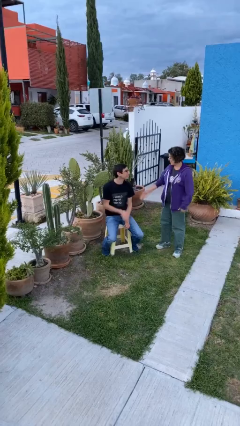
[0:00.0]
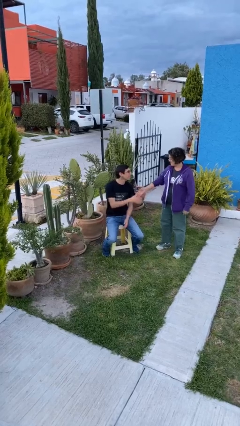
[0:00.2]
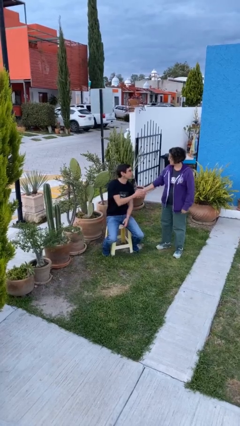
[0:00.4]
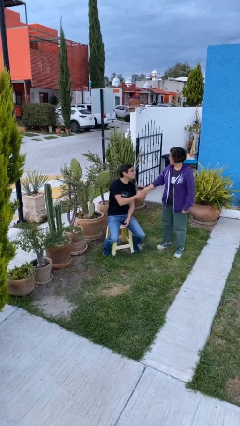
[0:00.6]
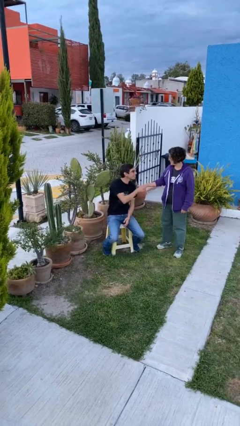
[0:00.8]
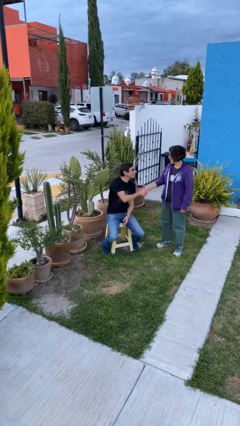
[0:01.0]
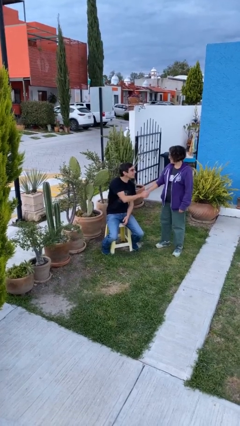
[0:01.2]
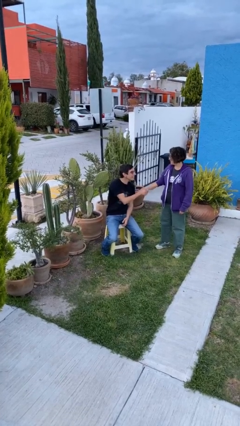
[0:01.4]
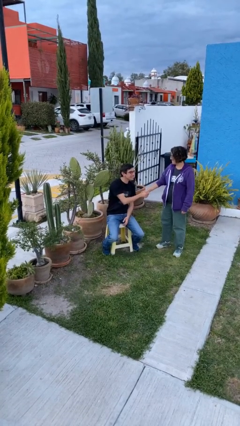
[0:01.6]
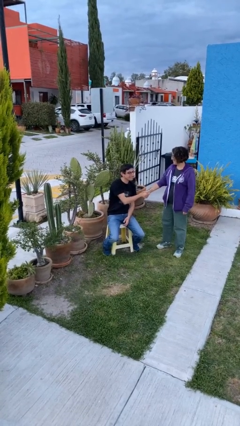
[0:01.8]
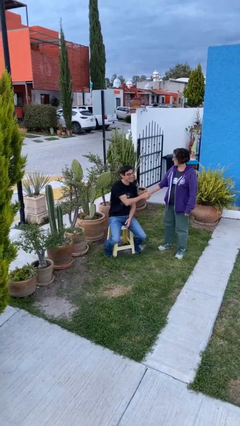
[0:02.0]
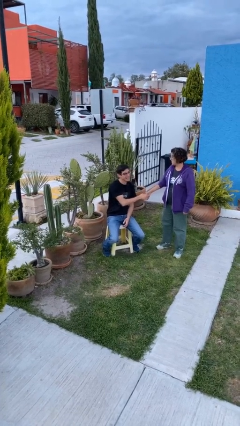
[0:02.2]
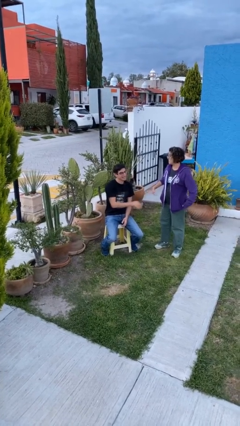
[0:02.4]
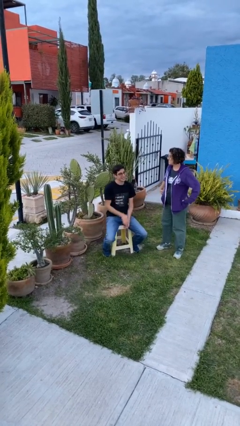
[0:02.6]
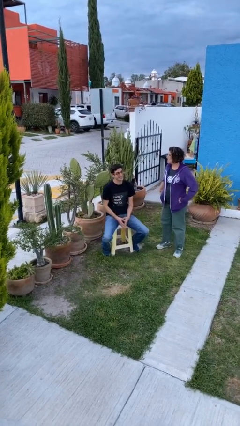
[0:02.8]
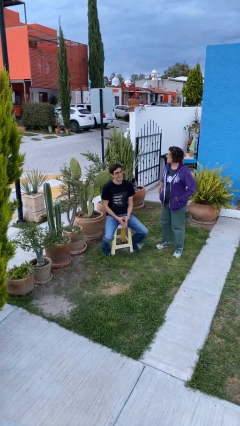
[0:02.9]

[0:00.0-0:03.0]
person shakes hand

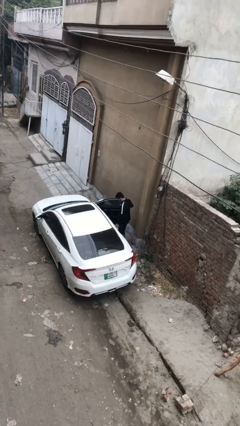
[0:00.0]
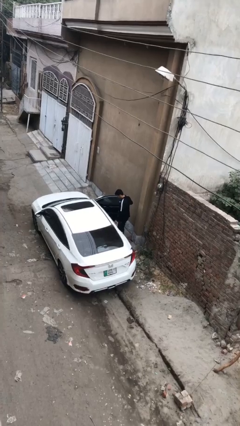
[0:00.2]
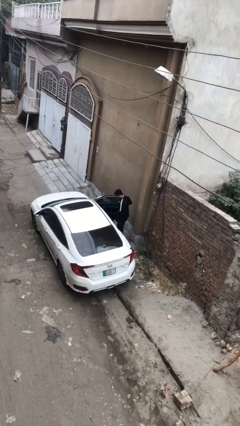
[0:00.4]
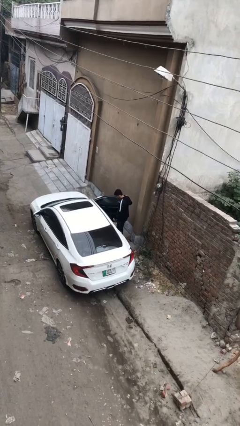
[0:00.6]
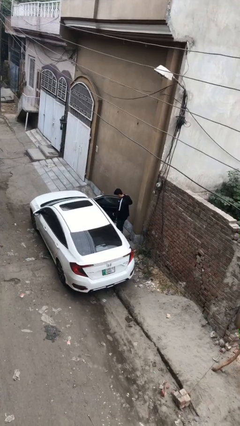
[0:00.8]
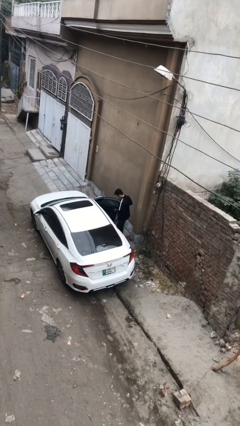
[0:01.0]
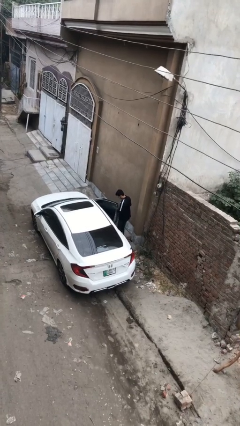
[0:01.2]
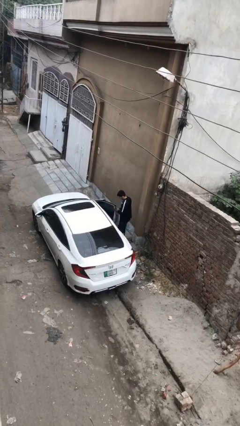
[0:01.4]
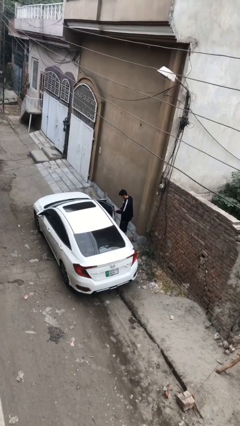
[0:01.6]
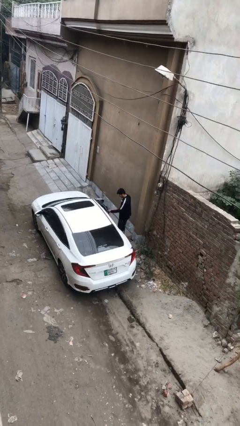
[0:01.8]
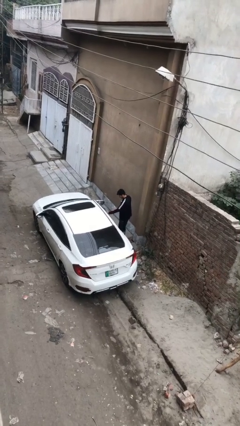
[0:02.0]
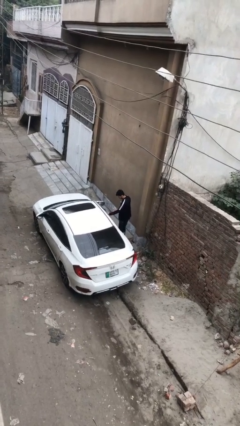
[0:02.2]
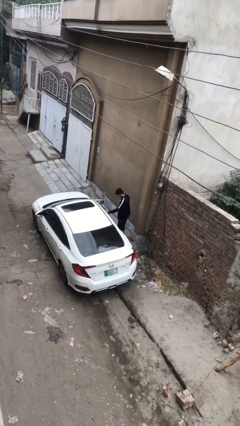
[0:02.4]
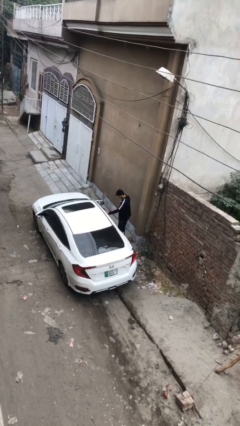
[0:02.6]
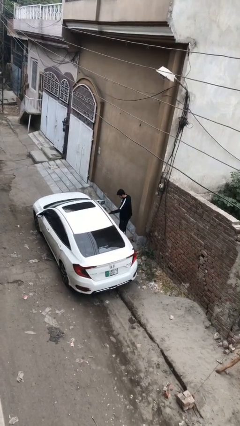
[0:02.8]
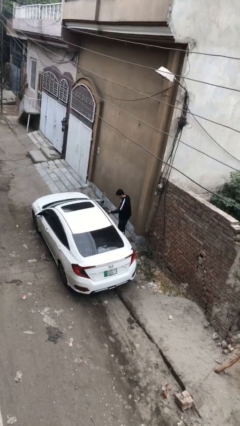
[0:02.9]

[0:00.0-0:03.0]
person closes car door

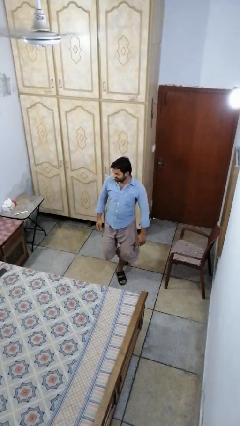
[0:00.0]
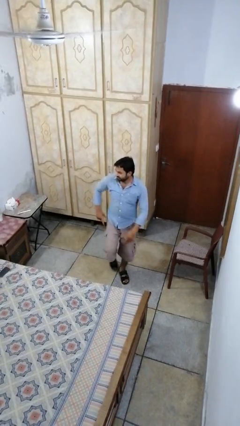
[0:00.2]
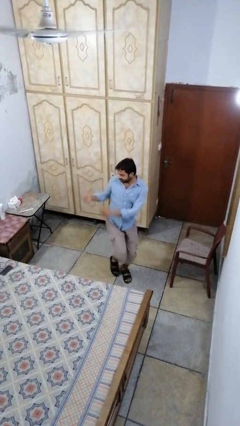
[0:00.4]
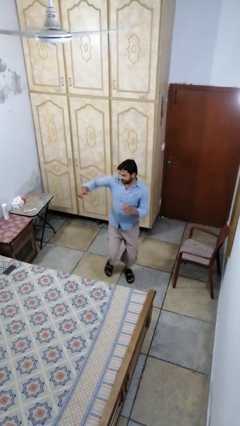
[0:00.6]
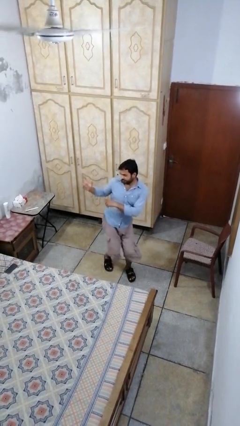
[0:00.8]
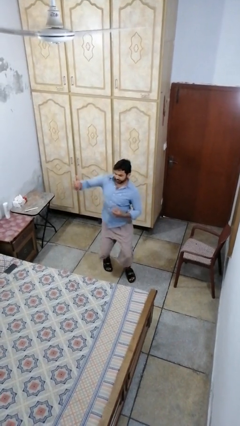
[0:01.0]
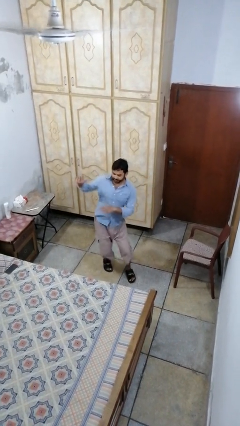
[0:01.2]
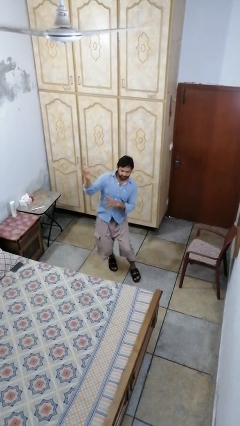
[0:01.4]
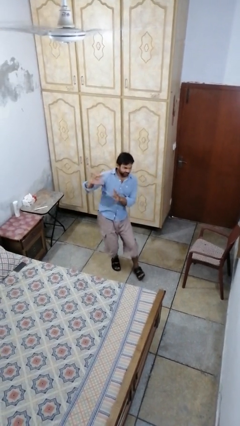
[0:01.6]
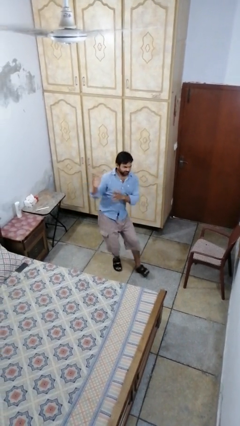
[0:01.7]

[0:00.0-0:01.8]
person dances in place

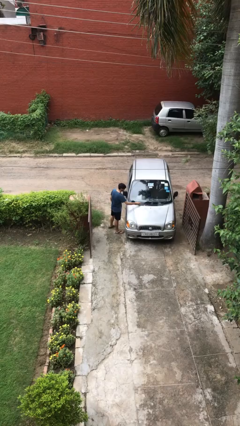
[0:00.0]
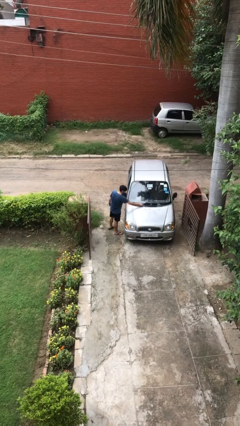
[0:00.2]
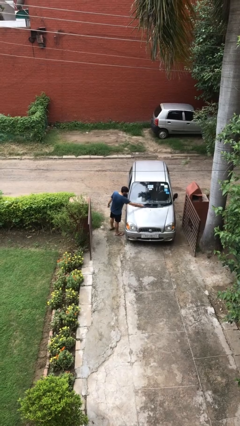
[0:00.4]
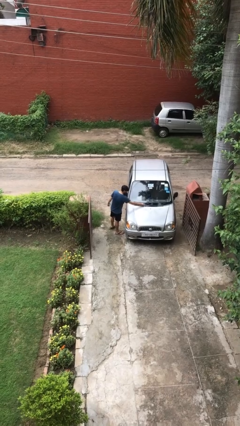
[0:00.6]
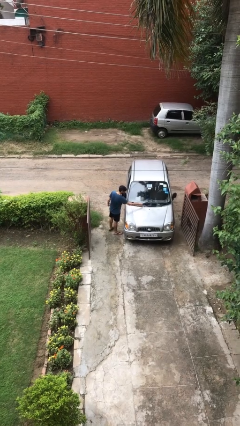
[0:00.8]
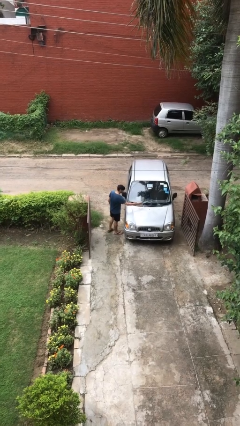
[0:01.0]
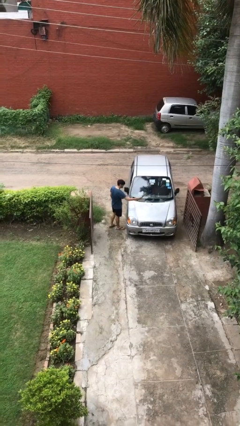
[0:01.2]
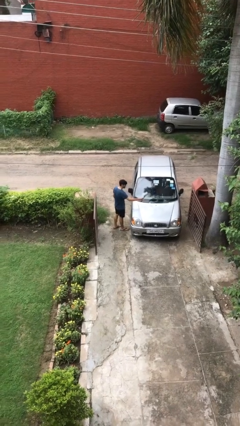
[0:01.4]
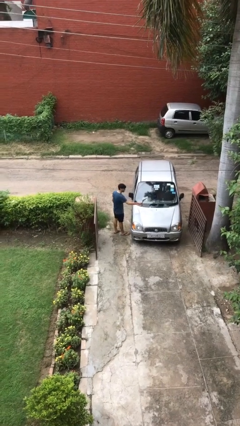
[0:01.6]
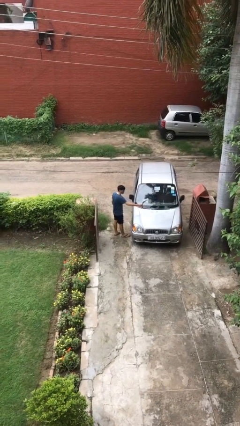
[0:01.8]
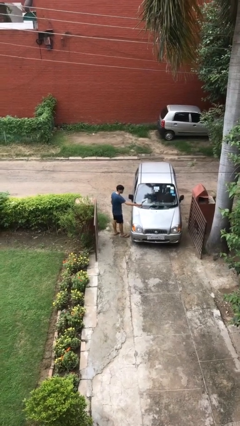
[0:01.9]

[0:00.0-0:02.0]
person flips up car wipers

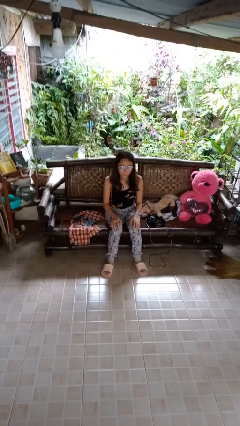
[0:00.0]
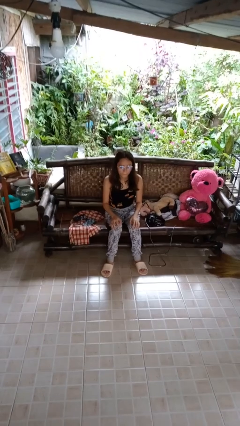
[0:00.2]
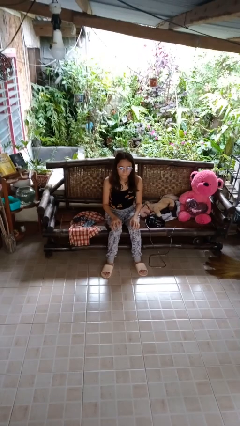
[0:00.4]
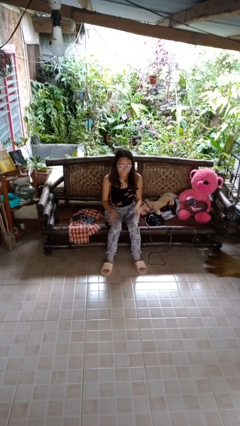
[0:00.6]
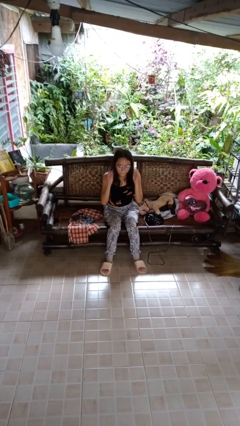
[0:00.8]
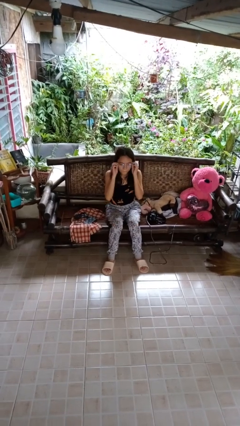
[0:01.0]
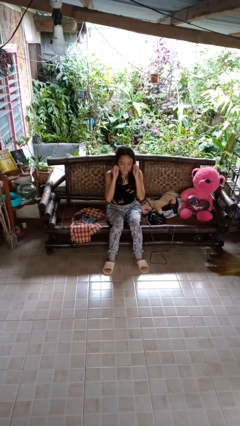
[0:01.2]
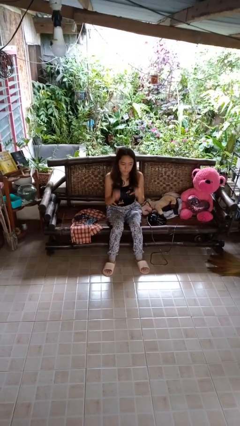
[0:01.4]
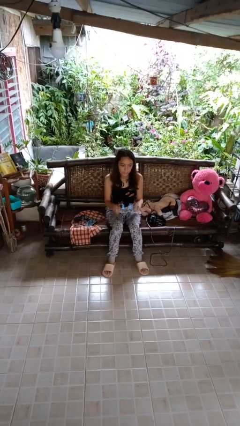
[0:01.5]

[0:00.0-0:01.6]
person takes off glasses

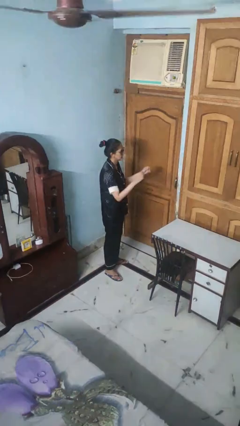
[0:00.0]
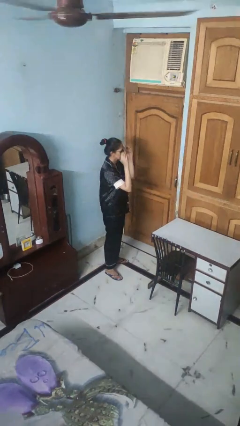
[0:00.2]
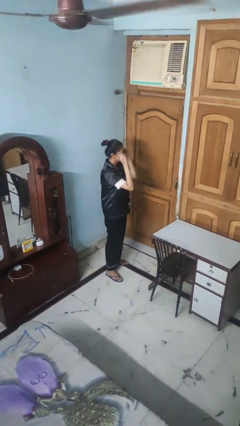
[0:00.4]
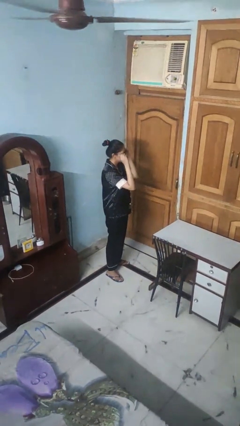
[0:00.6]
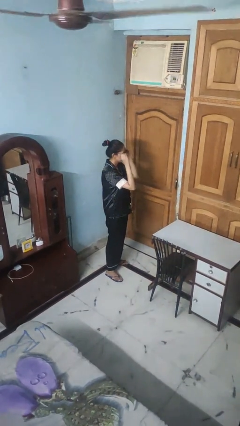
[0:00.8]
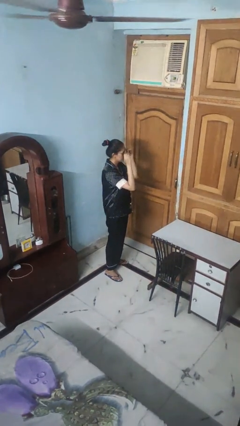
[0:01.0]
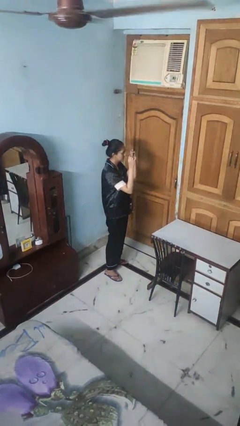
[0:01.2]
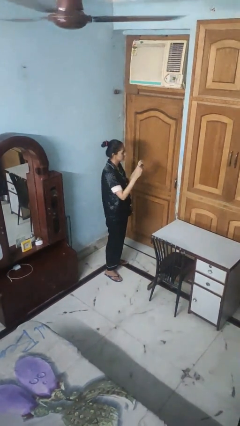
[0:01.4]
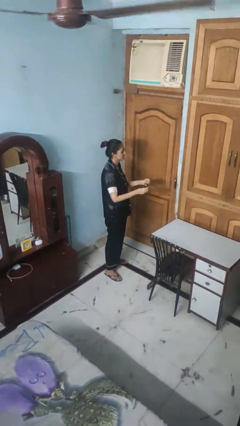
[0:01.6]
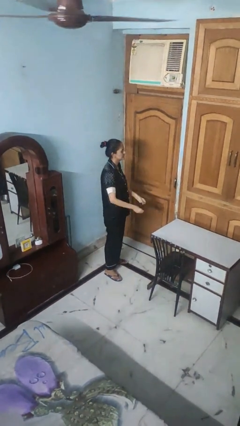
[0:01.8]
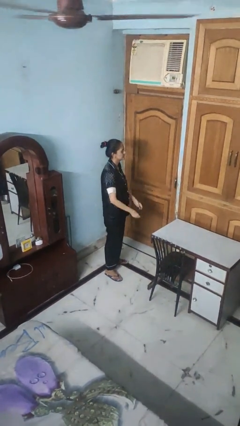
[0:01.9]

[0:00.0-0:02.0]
person takes off sunglasses

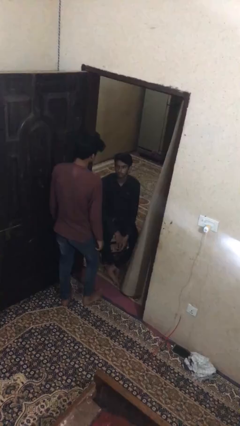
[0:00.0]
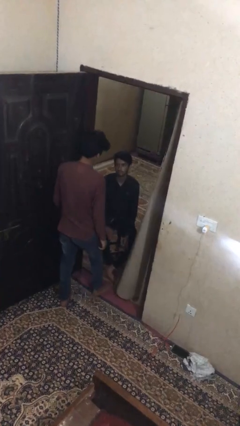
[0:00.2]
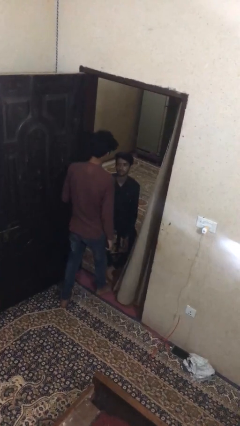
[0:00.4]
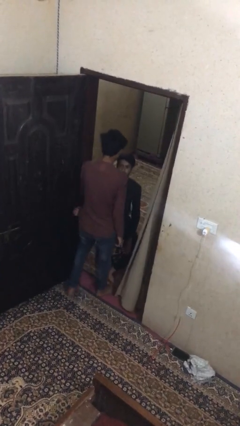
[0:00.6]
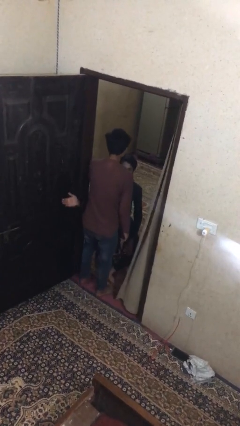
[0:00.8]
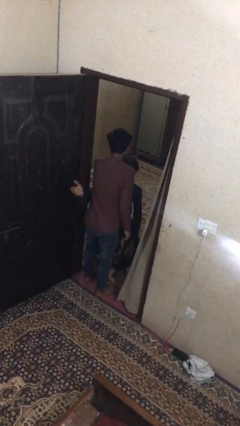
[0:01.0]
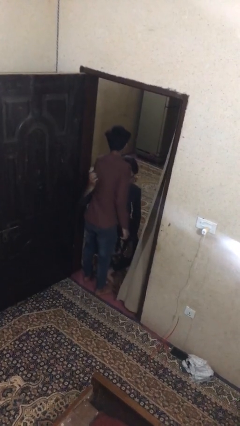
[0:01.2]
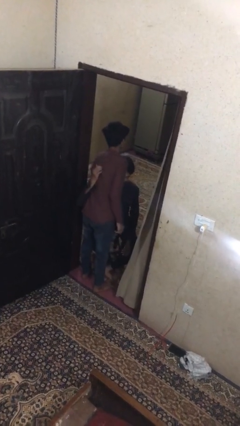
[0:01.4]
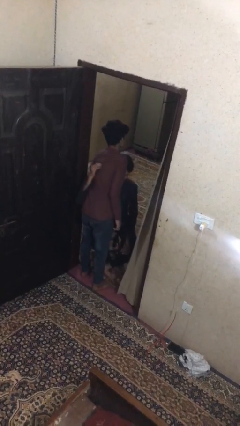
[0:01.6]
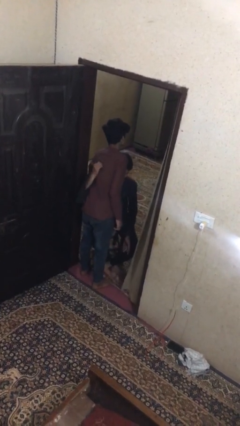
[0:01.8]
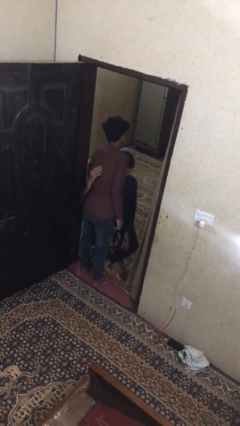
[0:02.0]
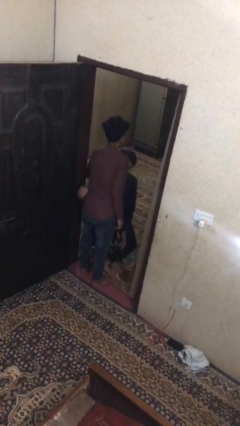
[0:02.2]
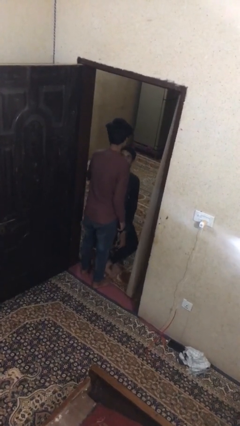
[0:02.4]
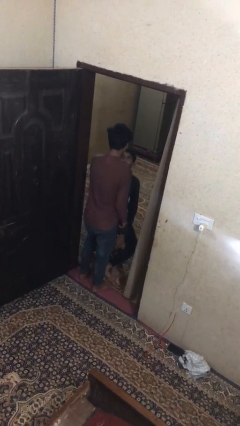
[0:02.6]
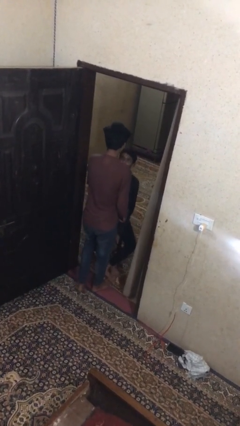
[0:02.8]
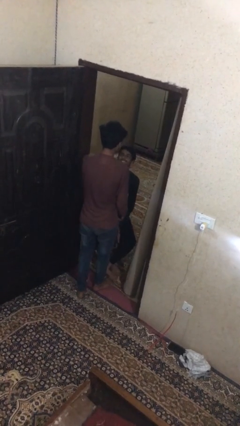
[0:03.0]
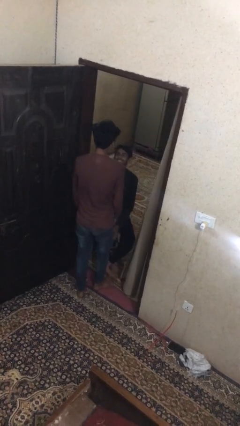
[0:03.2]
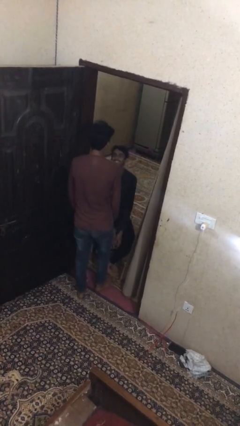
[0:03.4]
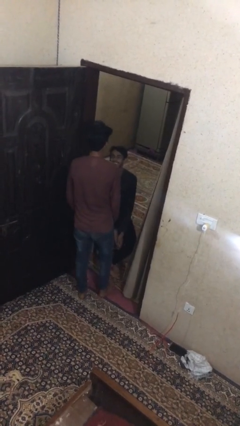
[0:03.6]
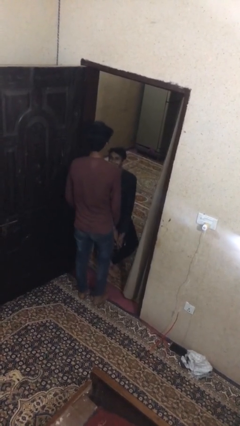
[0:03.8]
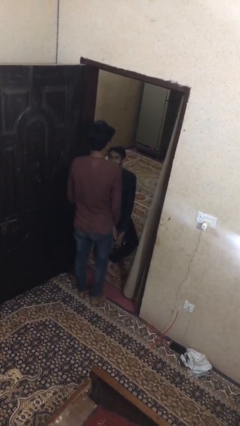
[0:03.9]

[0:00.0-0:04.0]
person embraces person
